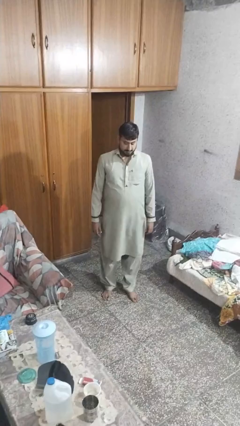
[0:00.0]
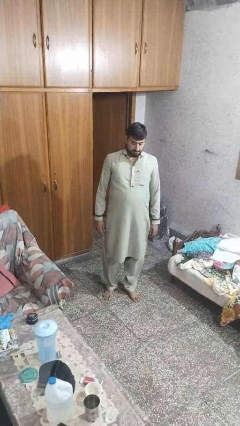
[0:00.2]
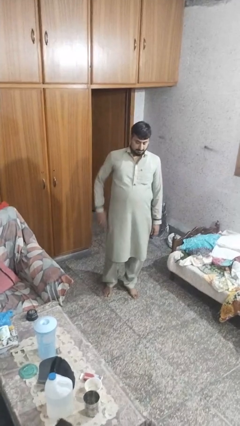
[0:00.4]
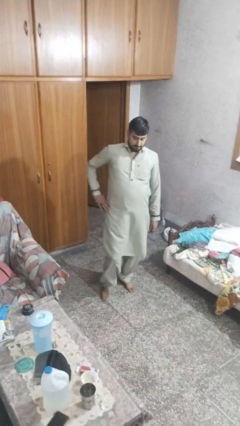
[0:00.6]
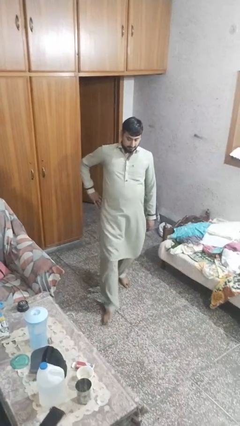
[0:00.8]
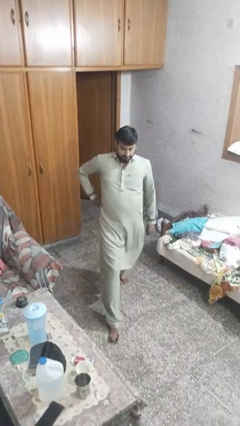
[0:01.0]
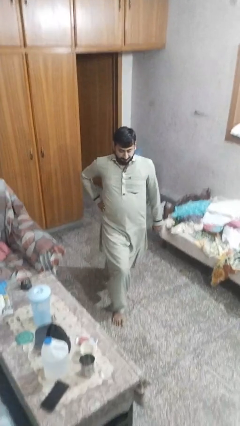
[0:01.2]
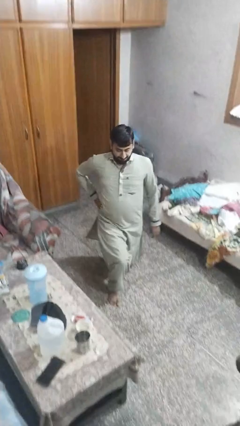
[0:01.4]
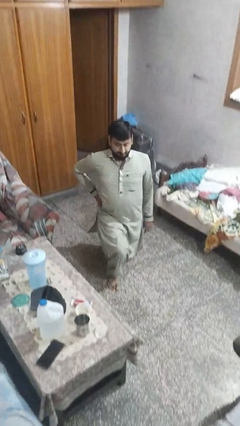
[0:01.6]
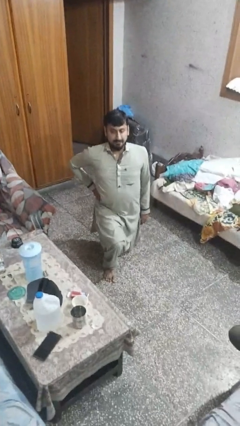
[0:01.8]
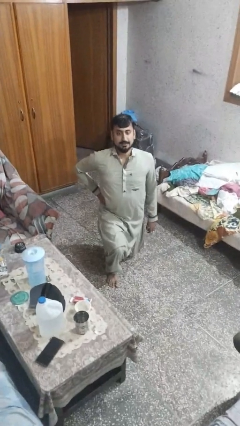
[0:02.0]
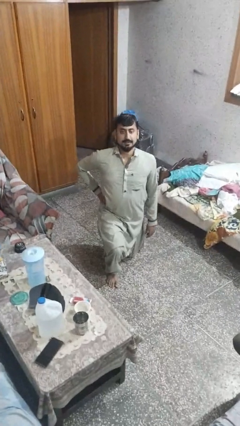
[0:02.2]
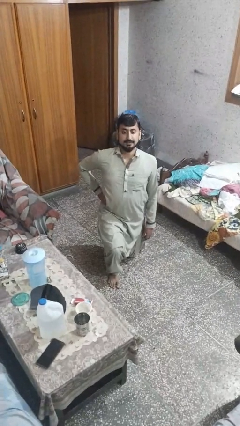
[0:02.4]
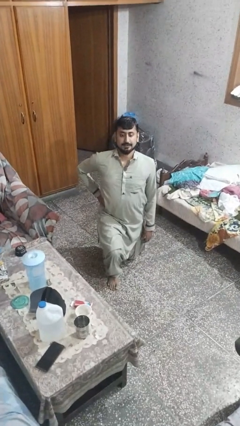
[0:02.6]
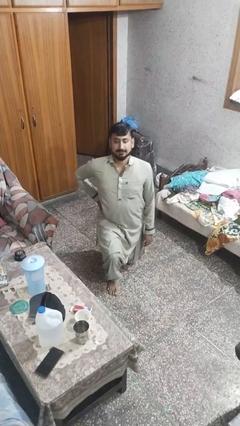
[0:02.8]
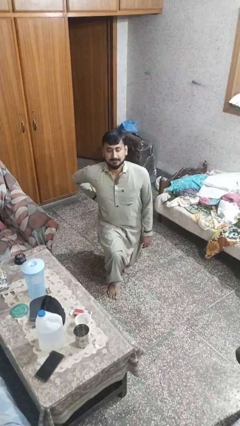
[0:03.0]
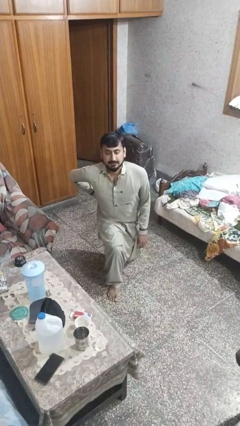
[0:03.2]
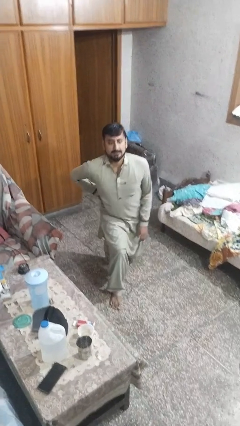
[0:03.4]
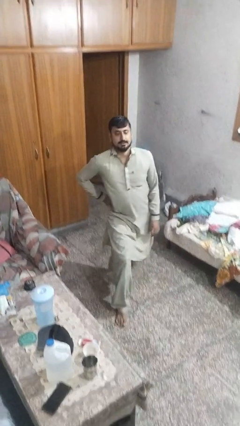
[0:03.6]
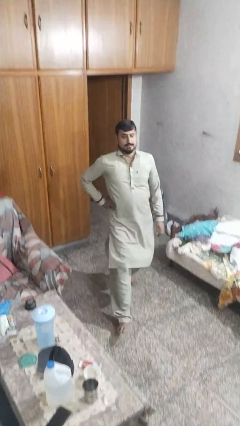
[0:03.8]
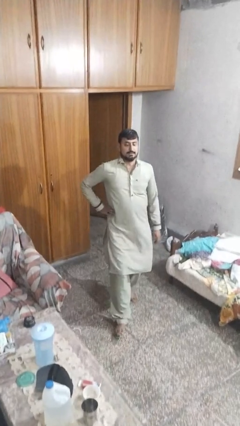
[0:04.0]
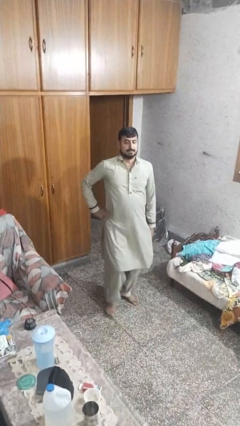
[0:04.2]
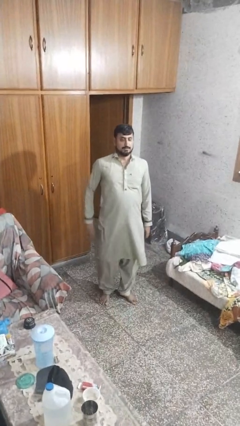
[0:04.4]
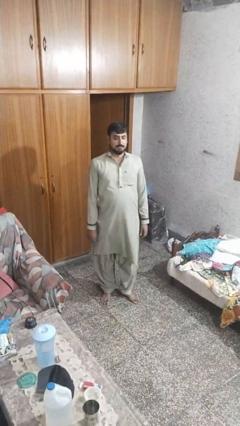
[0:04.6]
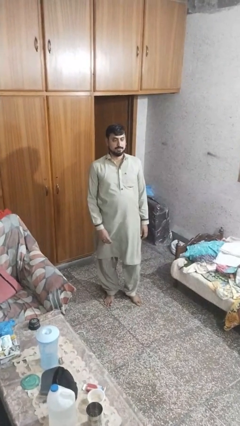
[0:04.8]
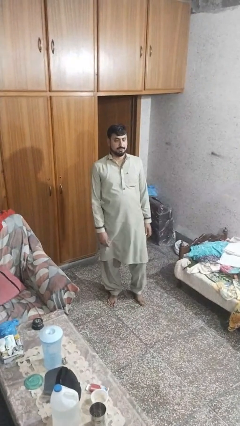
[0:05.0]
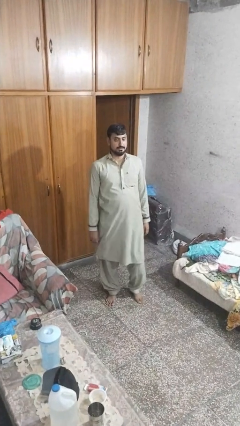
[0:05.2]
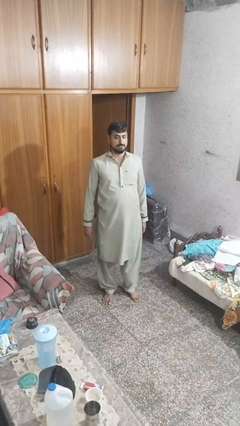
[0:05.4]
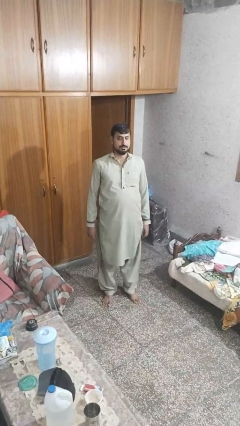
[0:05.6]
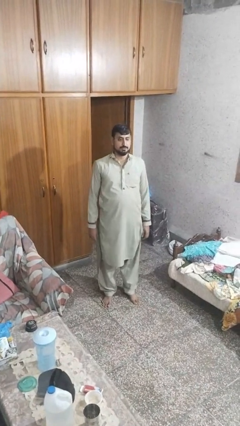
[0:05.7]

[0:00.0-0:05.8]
person exercises with lunges

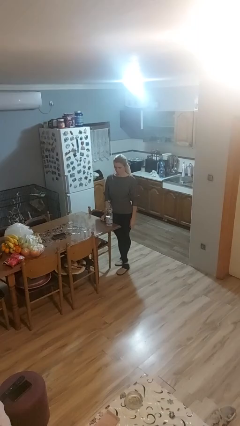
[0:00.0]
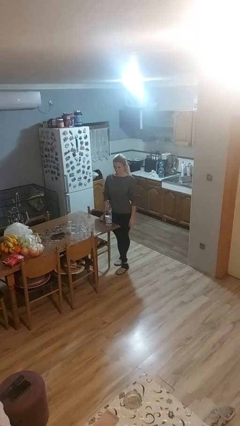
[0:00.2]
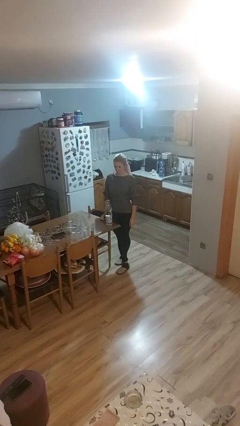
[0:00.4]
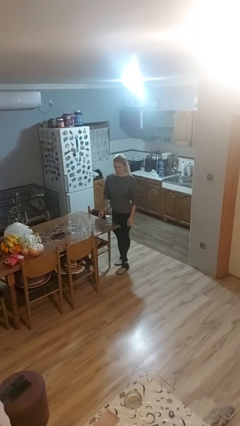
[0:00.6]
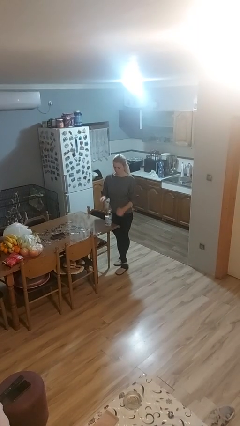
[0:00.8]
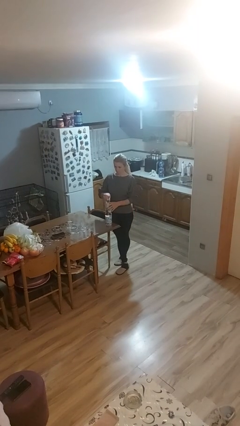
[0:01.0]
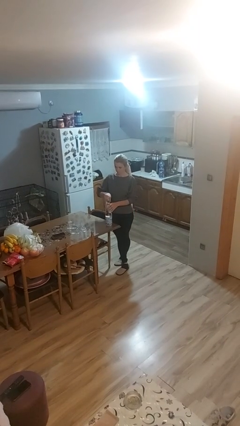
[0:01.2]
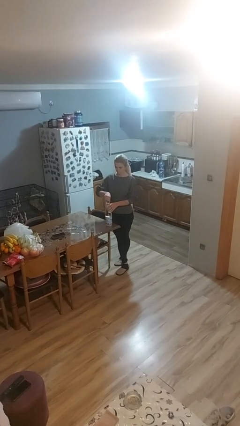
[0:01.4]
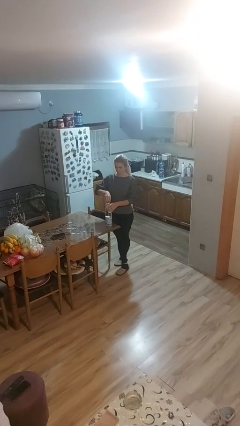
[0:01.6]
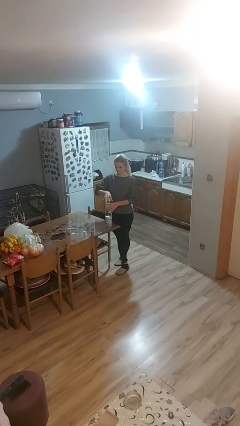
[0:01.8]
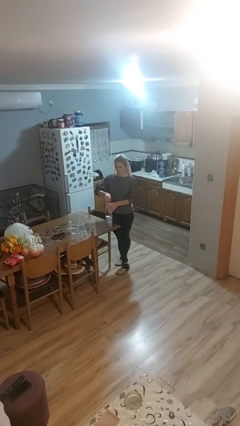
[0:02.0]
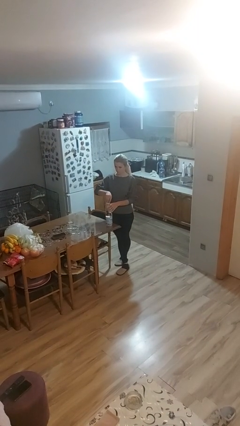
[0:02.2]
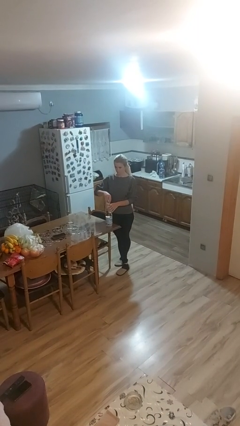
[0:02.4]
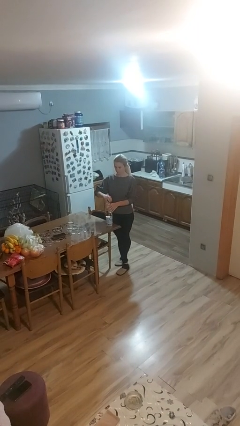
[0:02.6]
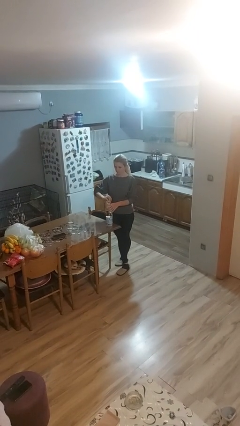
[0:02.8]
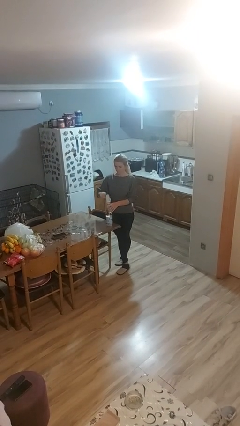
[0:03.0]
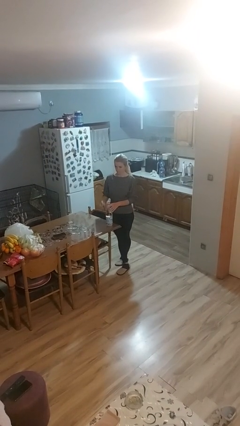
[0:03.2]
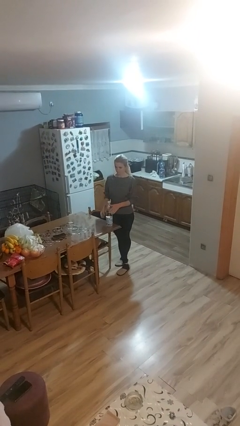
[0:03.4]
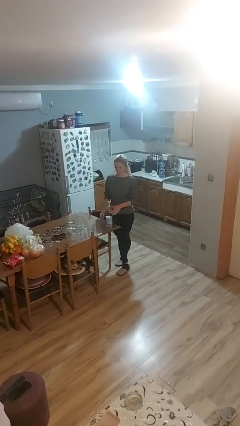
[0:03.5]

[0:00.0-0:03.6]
person unscrews lid from bottle

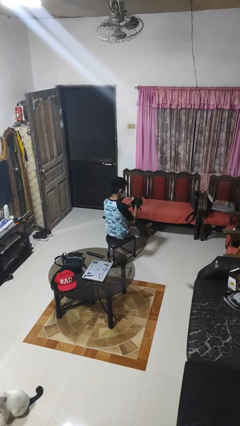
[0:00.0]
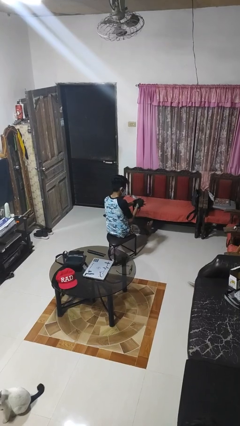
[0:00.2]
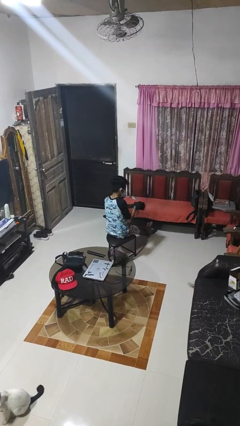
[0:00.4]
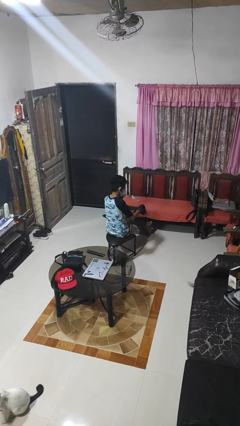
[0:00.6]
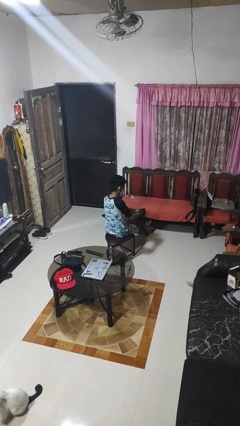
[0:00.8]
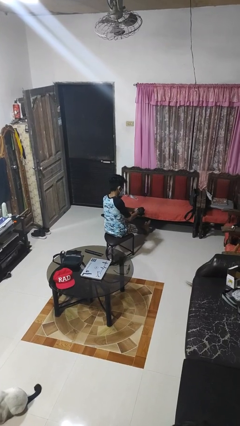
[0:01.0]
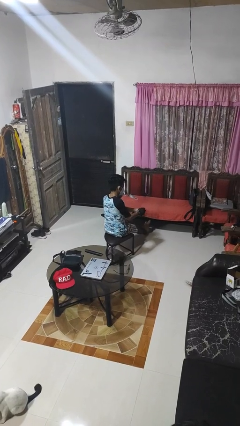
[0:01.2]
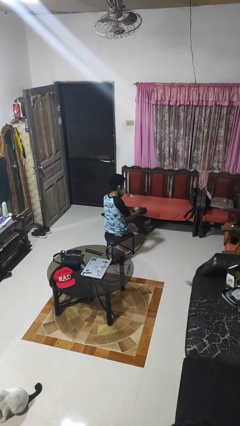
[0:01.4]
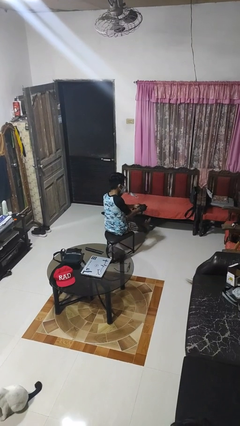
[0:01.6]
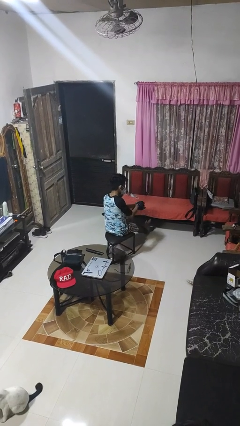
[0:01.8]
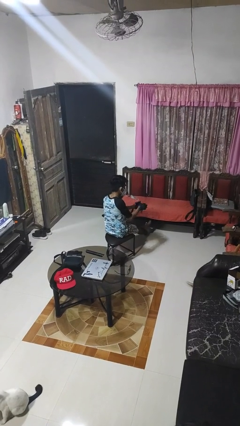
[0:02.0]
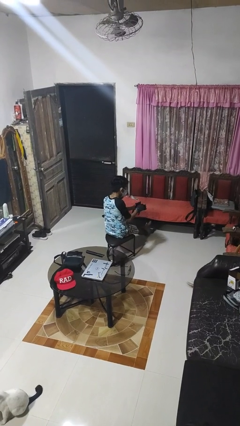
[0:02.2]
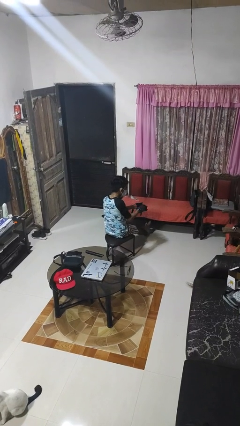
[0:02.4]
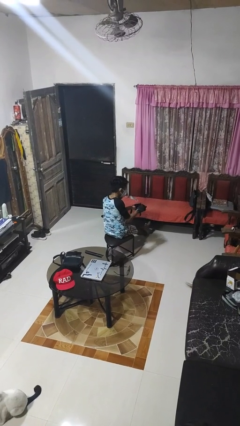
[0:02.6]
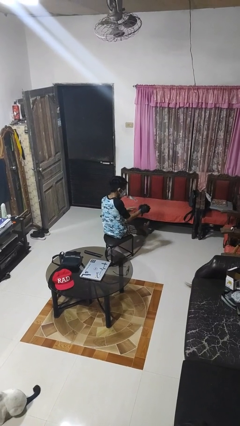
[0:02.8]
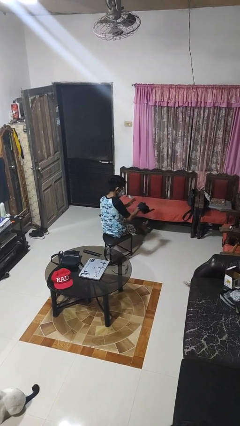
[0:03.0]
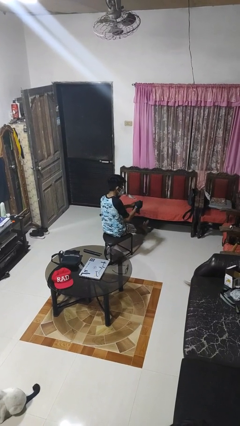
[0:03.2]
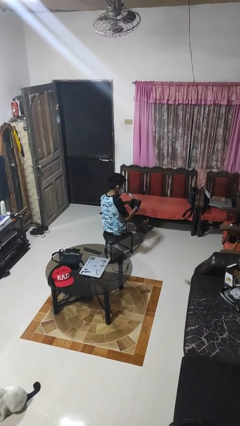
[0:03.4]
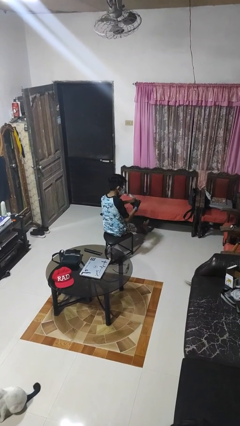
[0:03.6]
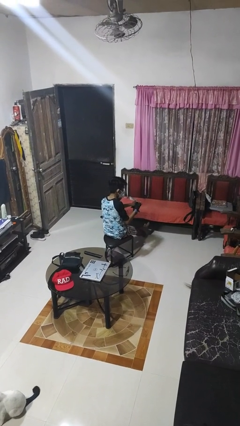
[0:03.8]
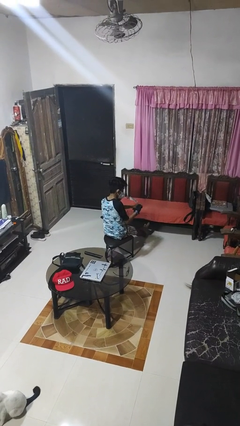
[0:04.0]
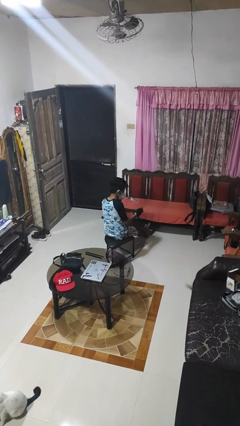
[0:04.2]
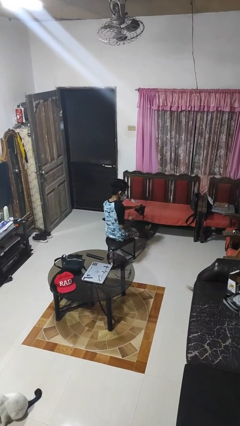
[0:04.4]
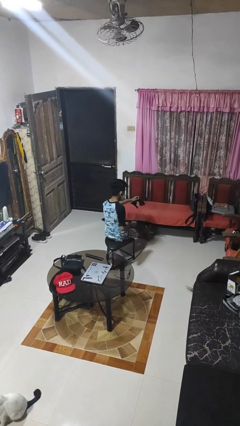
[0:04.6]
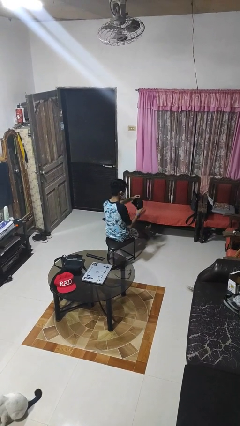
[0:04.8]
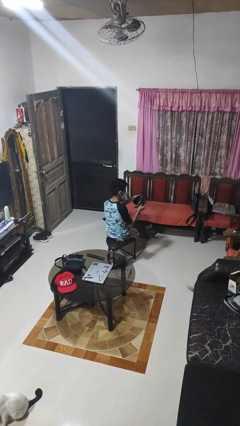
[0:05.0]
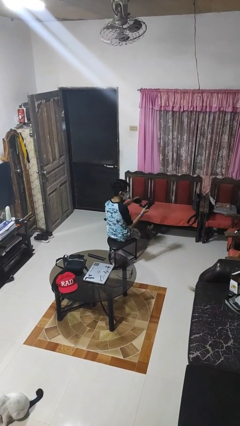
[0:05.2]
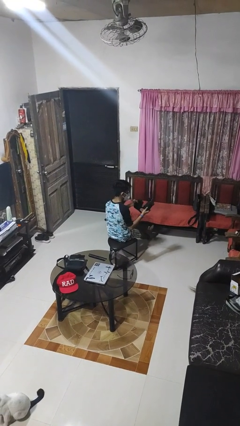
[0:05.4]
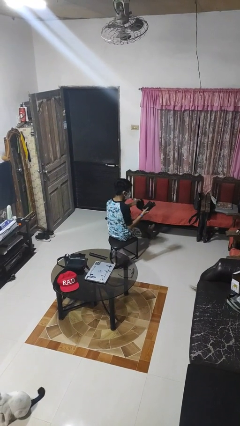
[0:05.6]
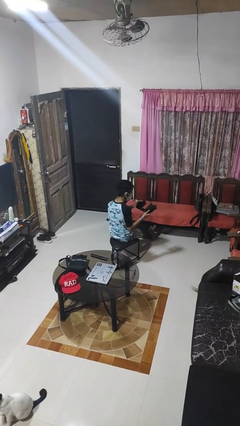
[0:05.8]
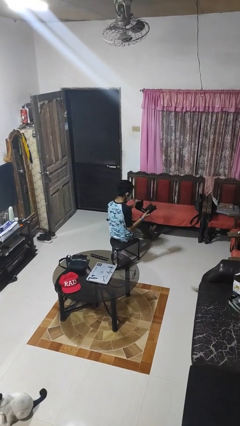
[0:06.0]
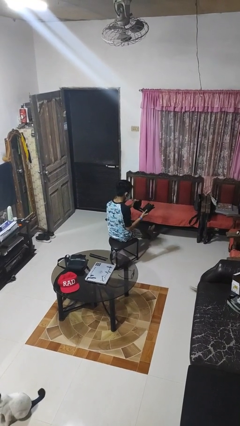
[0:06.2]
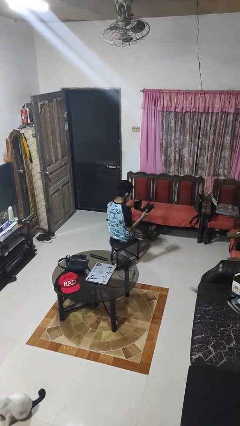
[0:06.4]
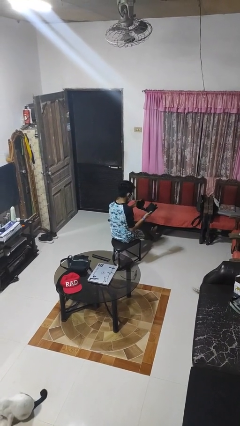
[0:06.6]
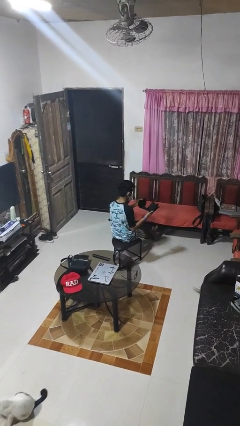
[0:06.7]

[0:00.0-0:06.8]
person takes off gloves

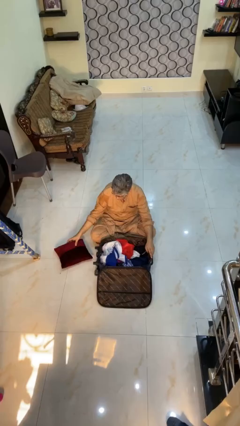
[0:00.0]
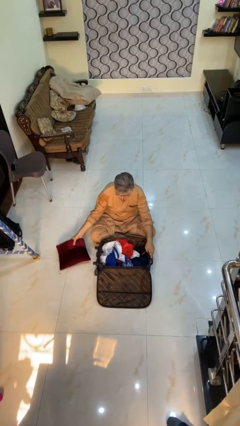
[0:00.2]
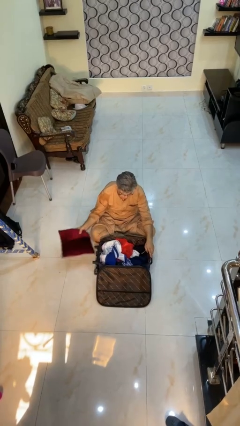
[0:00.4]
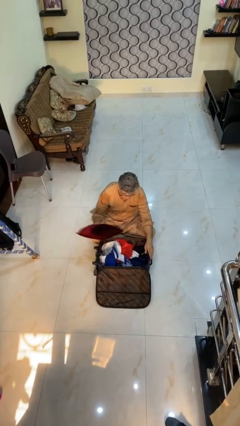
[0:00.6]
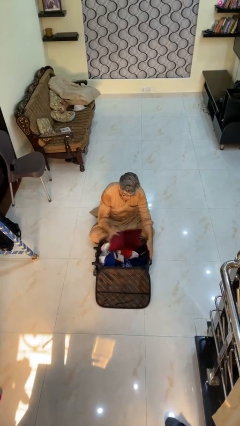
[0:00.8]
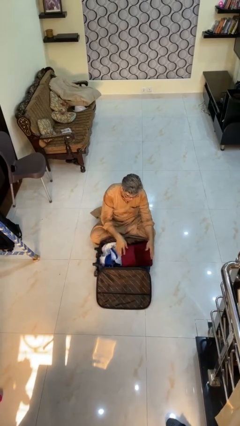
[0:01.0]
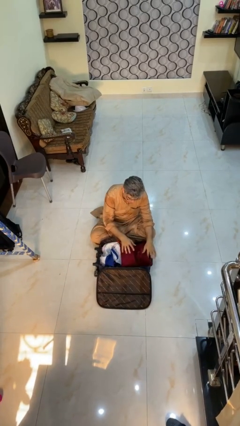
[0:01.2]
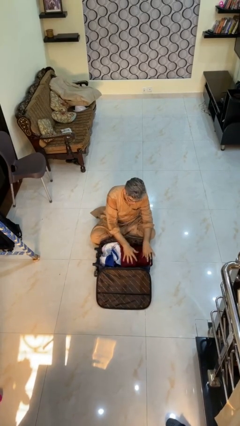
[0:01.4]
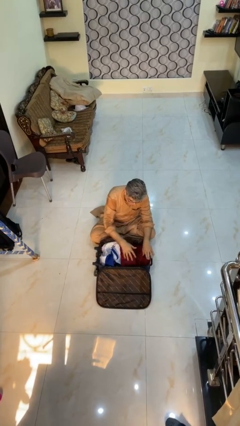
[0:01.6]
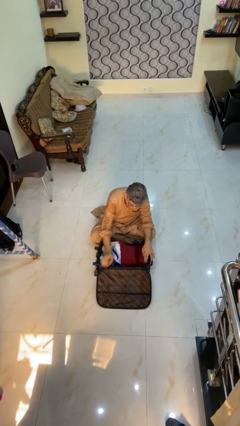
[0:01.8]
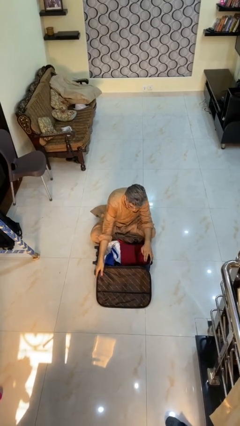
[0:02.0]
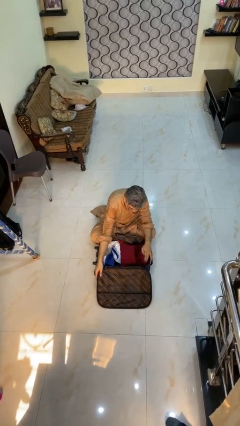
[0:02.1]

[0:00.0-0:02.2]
person loads clothes into suitcase
